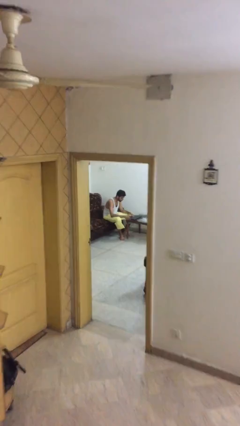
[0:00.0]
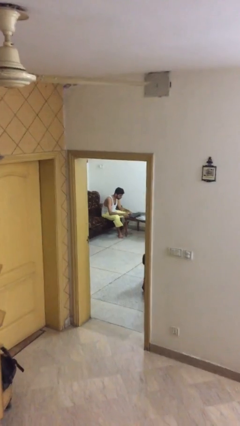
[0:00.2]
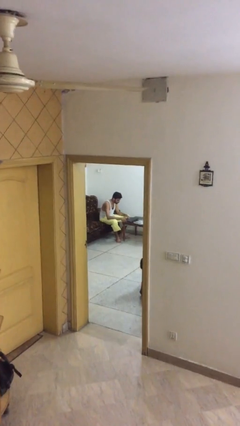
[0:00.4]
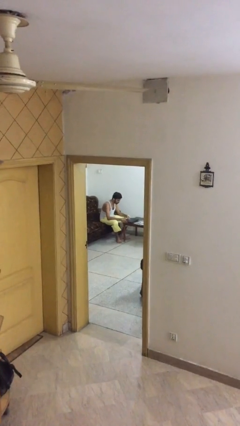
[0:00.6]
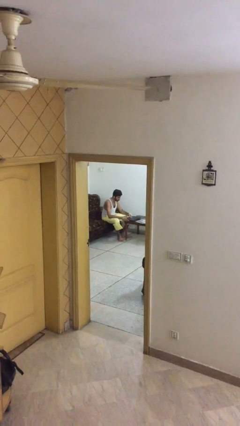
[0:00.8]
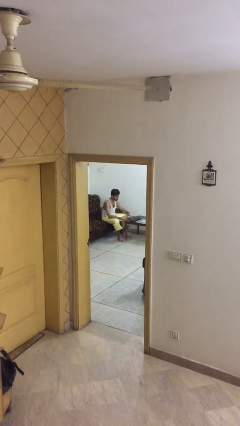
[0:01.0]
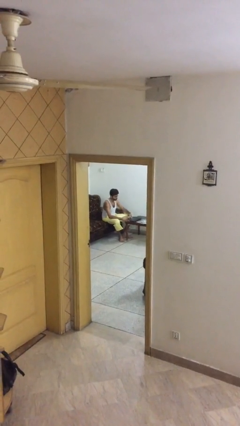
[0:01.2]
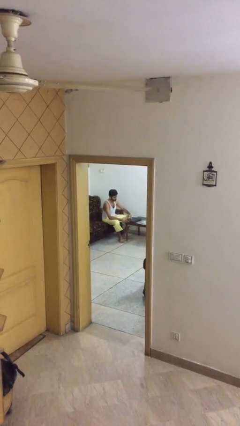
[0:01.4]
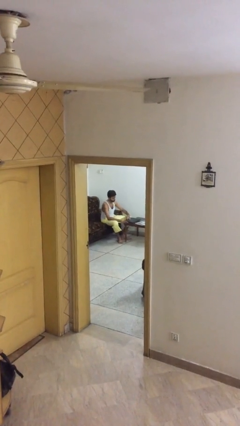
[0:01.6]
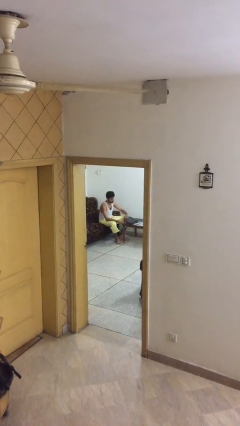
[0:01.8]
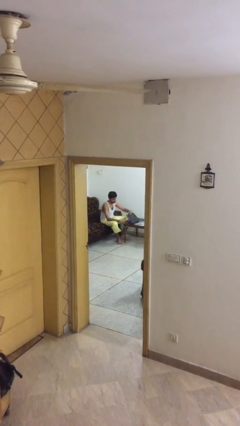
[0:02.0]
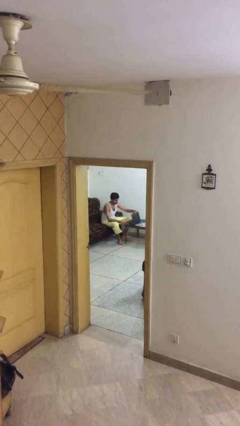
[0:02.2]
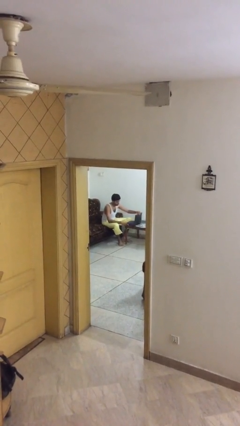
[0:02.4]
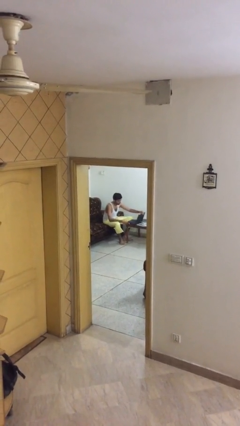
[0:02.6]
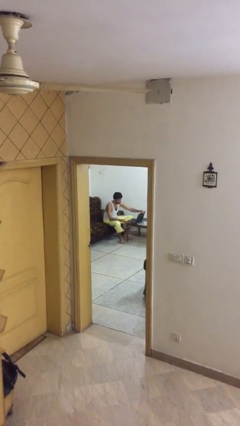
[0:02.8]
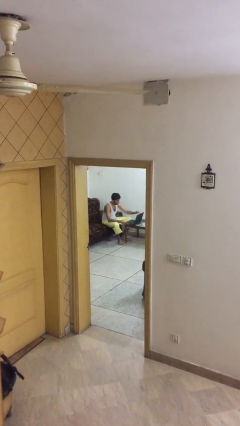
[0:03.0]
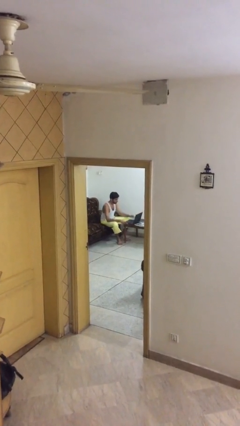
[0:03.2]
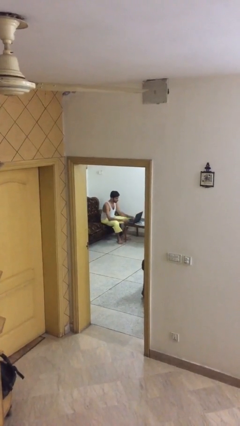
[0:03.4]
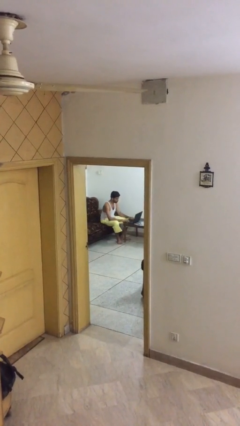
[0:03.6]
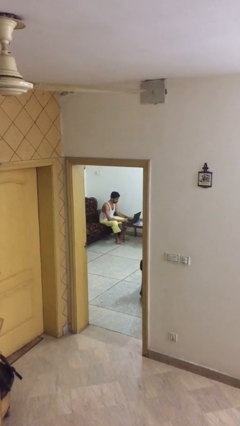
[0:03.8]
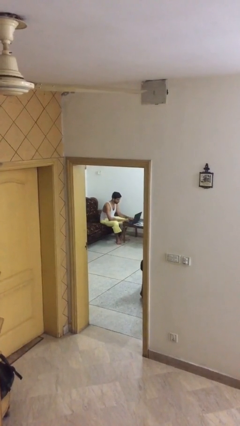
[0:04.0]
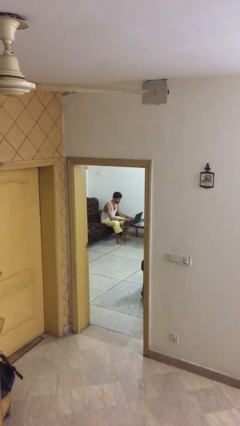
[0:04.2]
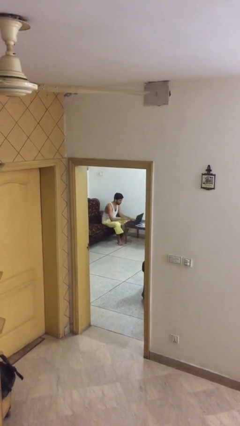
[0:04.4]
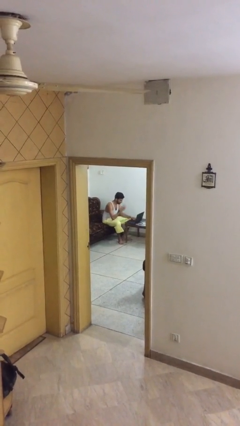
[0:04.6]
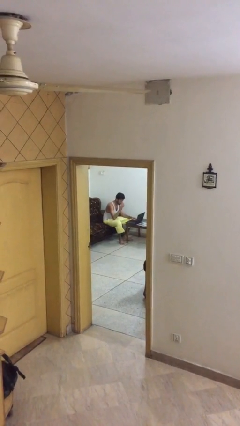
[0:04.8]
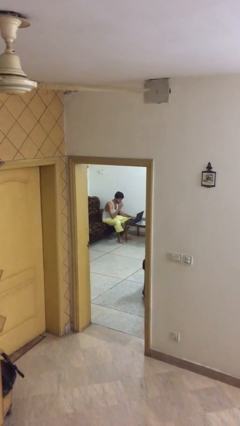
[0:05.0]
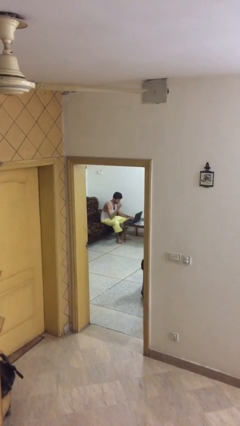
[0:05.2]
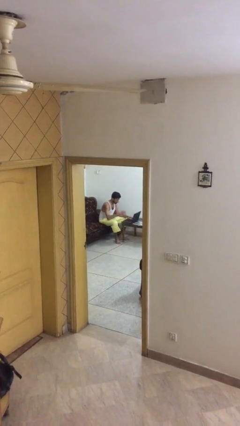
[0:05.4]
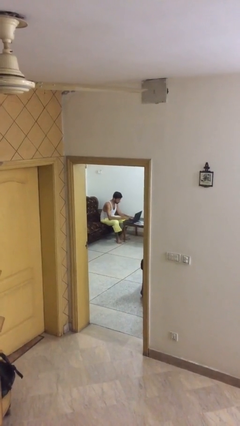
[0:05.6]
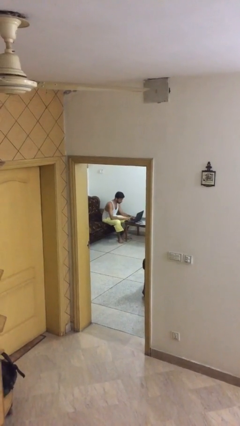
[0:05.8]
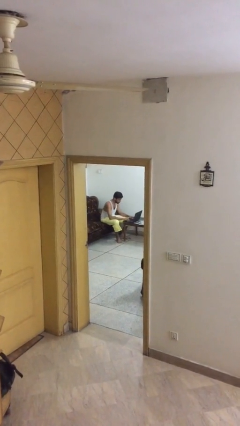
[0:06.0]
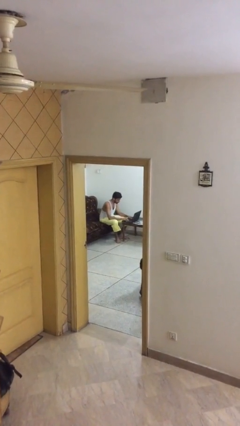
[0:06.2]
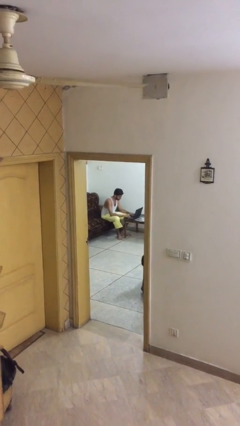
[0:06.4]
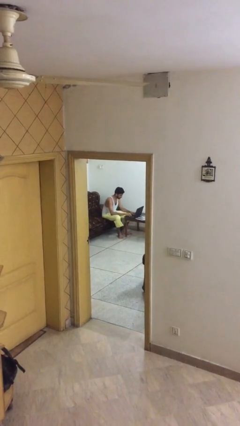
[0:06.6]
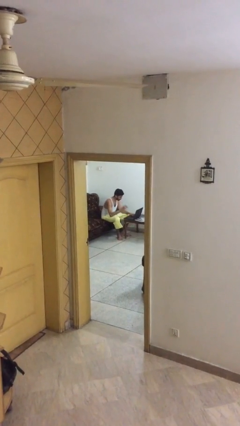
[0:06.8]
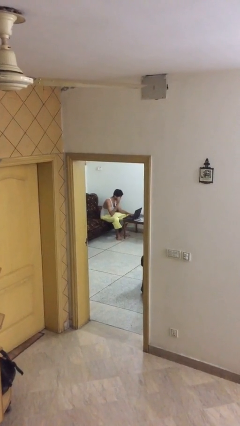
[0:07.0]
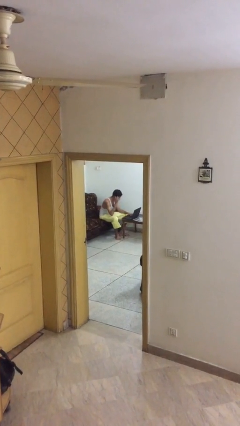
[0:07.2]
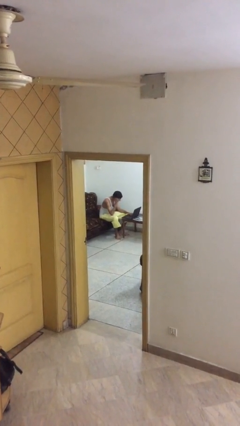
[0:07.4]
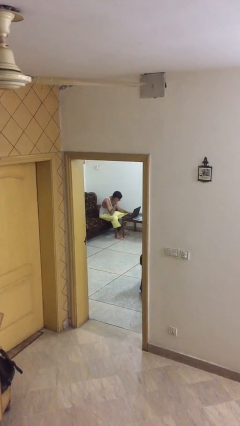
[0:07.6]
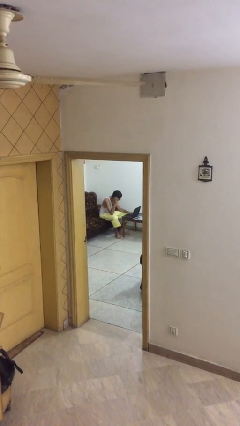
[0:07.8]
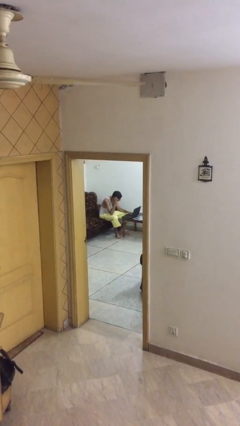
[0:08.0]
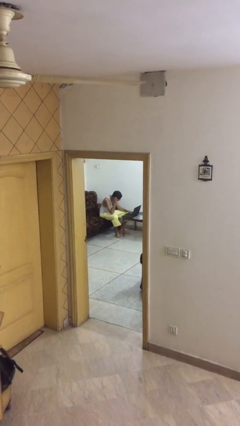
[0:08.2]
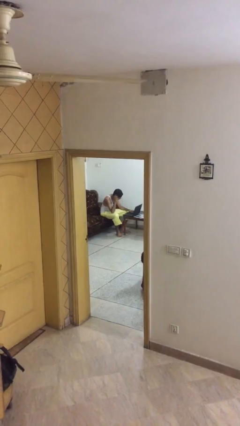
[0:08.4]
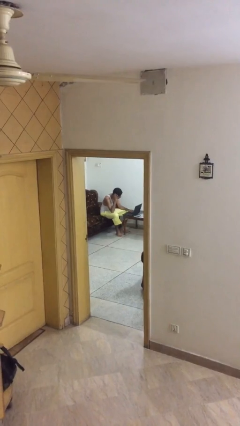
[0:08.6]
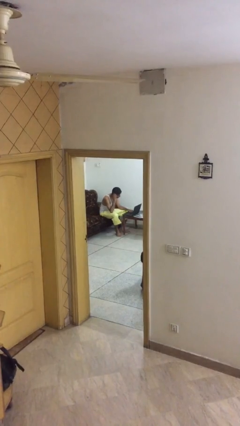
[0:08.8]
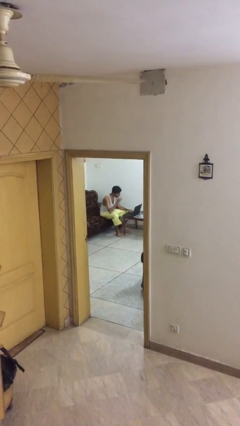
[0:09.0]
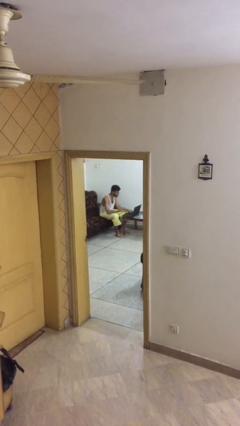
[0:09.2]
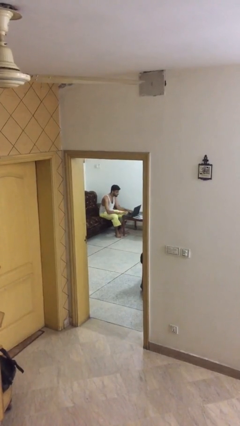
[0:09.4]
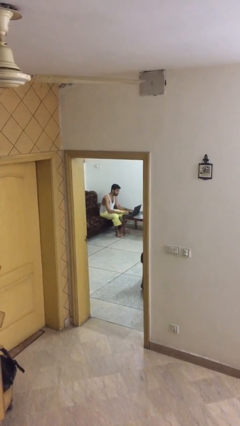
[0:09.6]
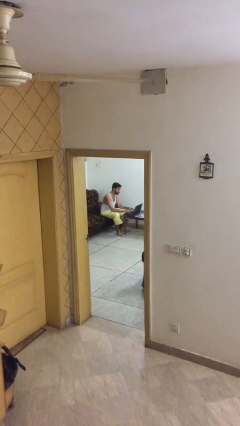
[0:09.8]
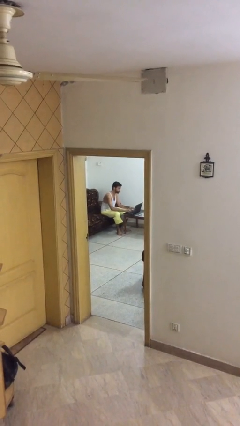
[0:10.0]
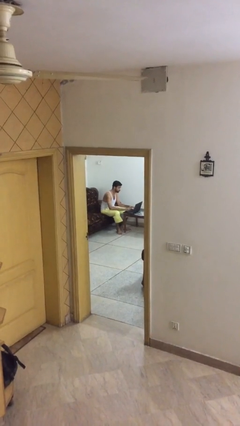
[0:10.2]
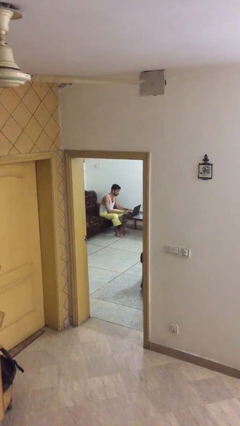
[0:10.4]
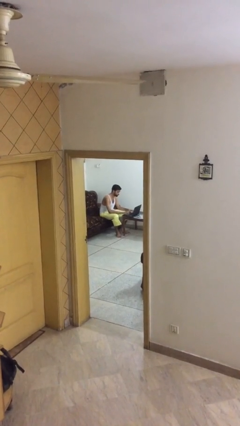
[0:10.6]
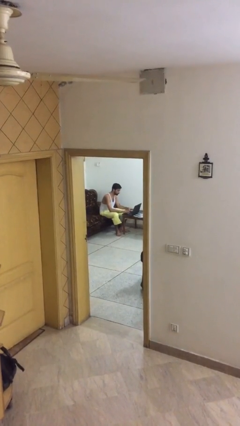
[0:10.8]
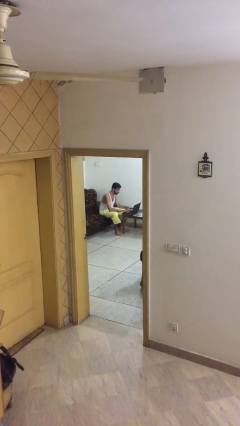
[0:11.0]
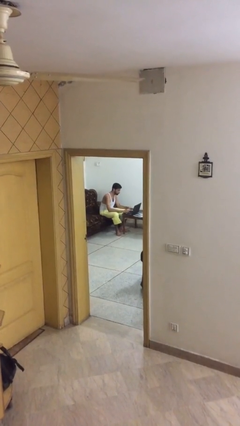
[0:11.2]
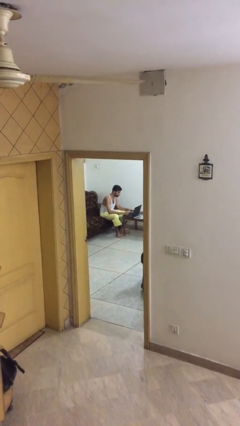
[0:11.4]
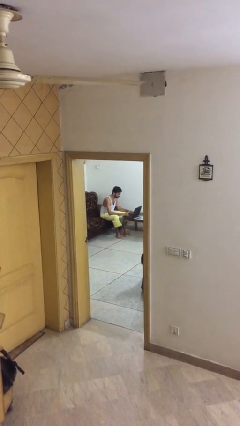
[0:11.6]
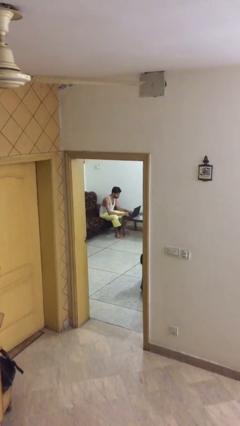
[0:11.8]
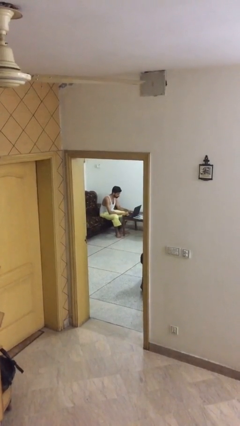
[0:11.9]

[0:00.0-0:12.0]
person interacts with laptop

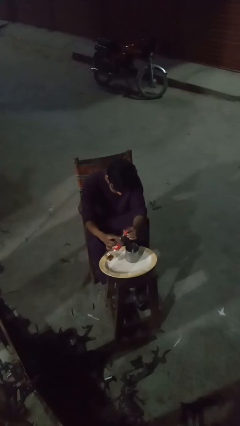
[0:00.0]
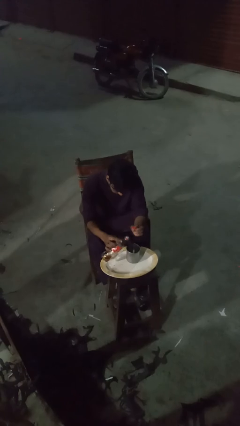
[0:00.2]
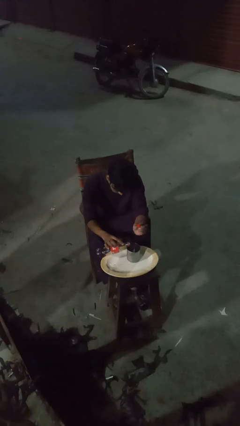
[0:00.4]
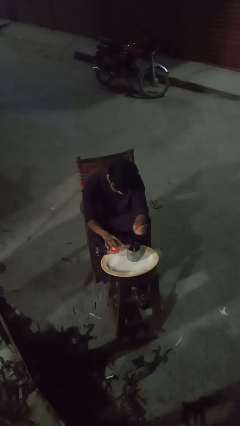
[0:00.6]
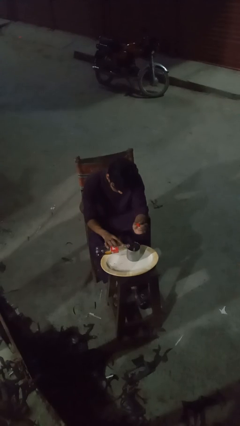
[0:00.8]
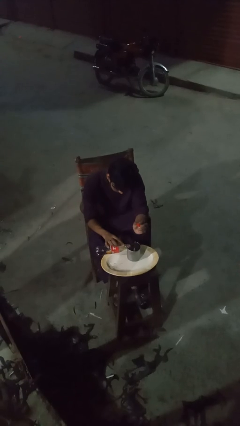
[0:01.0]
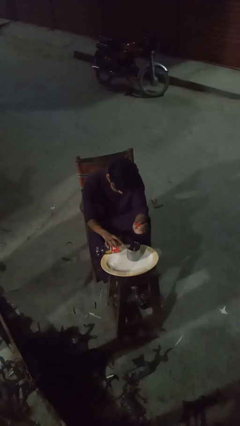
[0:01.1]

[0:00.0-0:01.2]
person pours liquid into cup

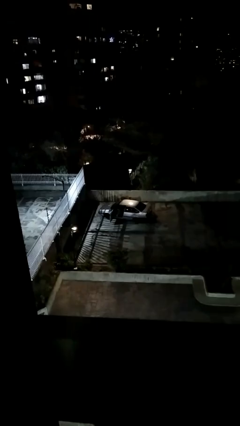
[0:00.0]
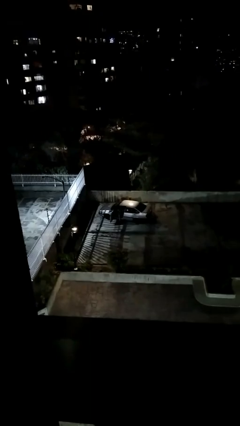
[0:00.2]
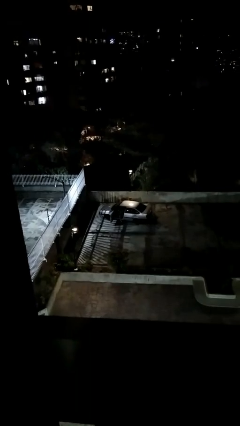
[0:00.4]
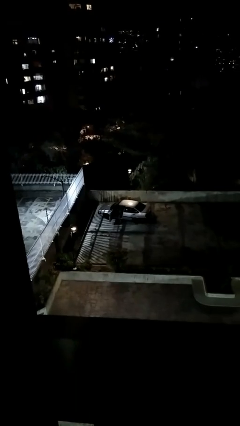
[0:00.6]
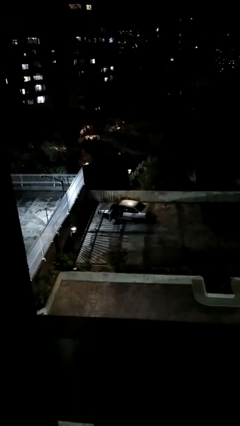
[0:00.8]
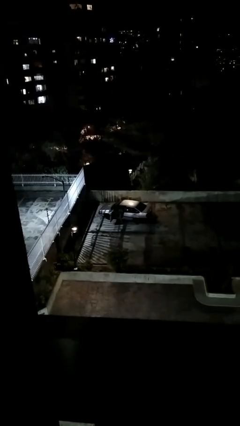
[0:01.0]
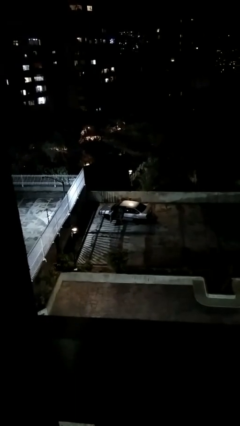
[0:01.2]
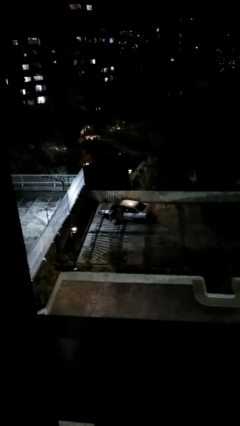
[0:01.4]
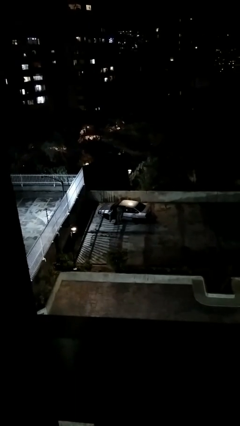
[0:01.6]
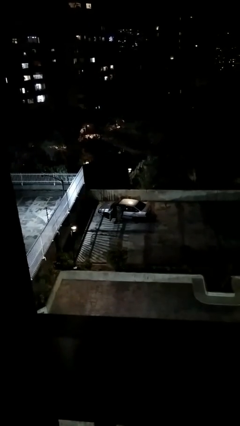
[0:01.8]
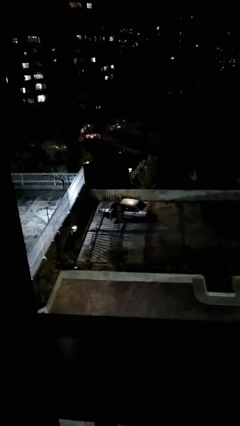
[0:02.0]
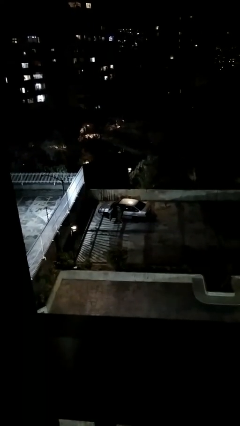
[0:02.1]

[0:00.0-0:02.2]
person exits car

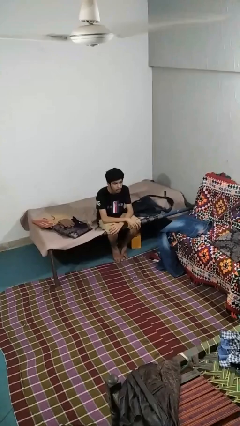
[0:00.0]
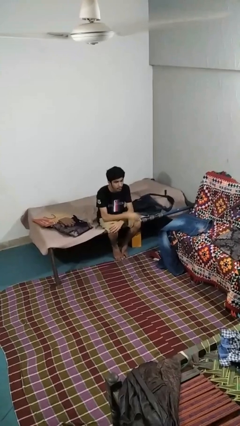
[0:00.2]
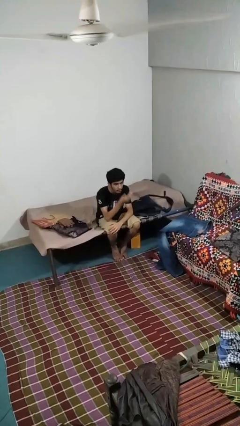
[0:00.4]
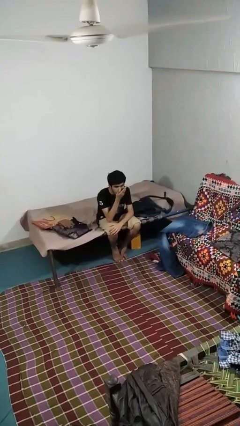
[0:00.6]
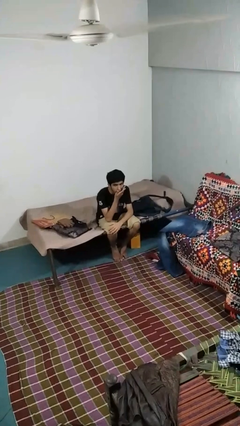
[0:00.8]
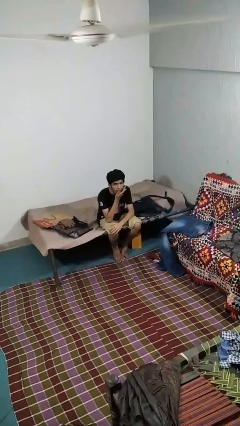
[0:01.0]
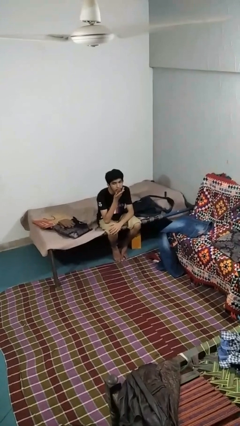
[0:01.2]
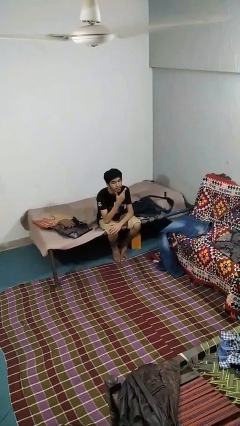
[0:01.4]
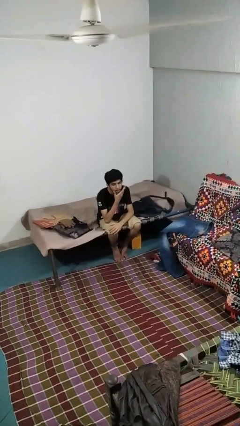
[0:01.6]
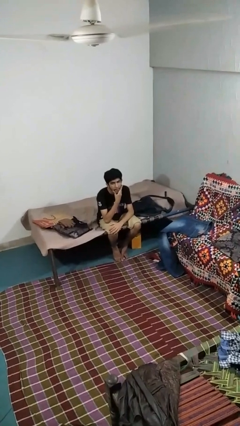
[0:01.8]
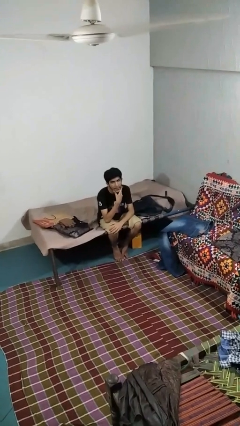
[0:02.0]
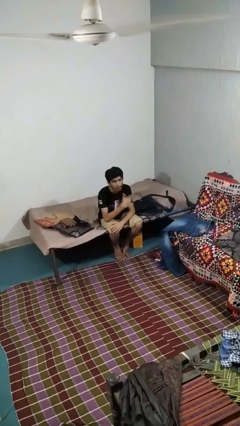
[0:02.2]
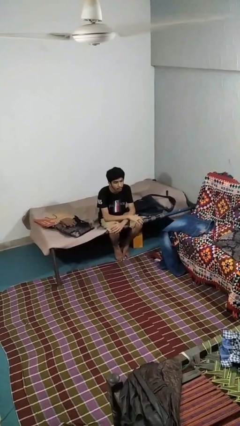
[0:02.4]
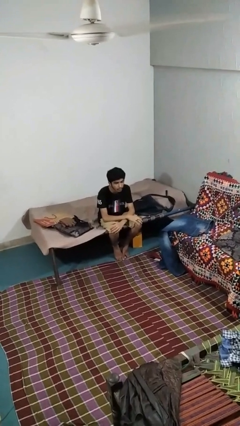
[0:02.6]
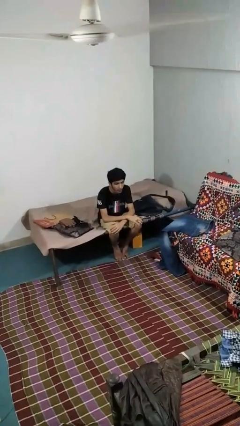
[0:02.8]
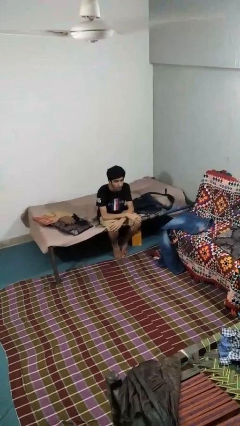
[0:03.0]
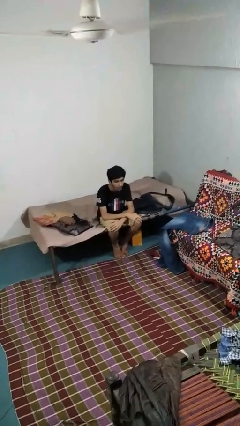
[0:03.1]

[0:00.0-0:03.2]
person strokes chin
